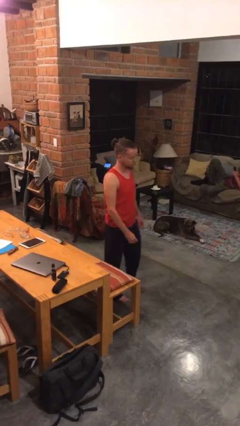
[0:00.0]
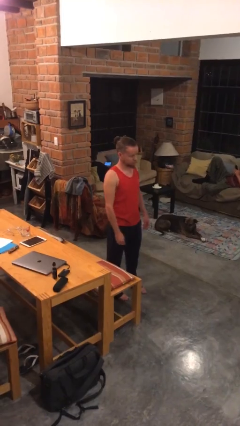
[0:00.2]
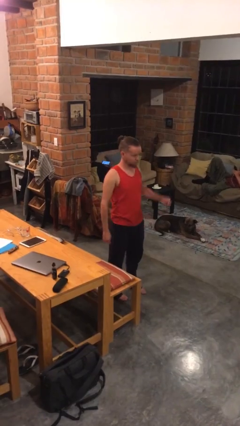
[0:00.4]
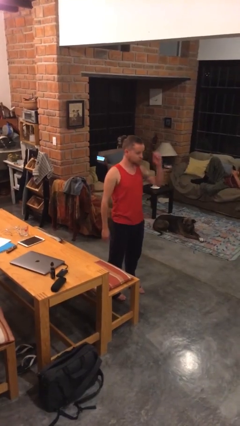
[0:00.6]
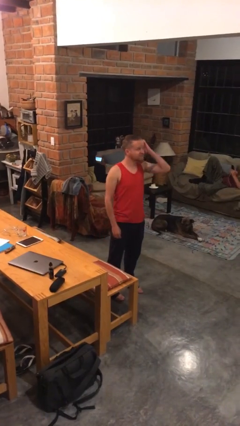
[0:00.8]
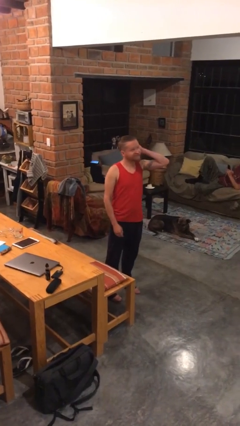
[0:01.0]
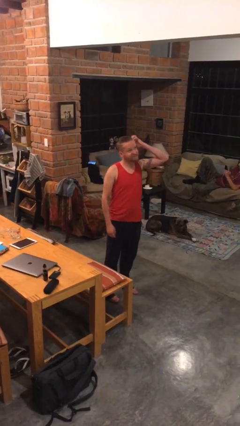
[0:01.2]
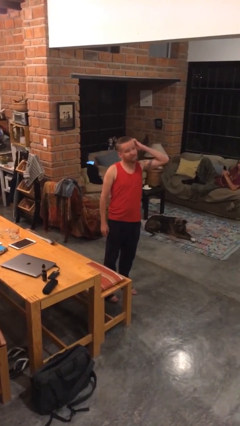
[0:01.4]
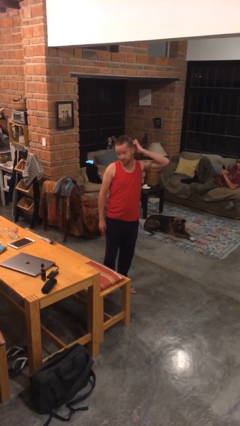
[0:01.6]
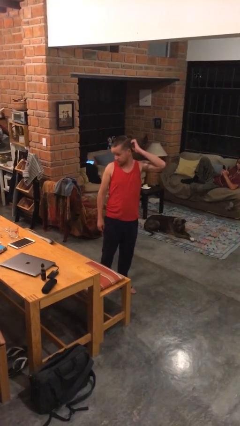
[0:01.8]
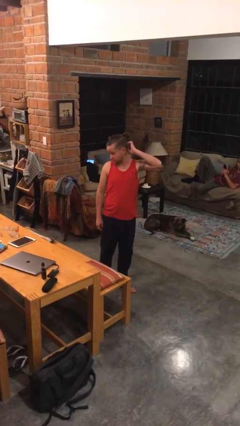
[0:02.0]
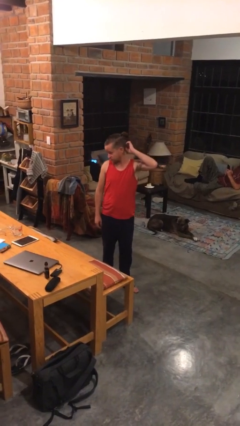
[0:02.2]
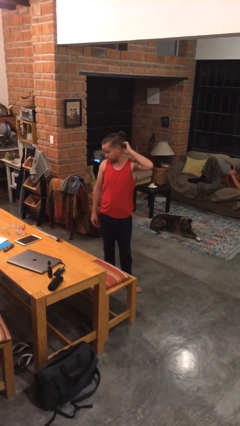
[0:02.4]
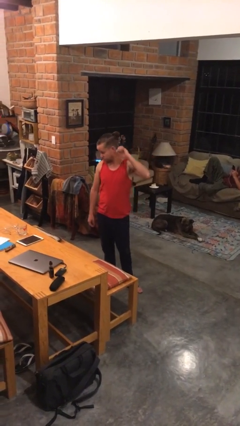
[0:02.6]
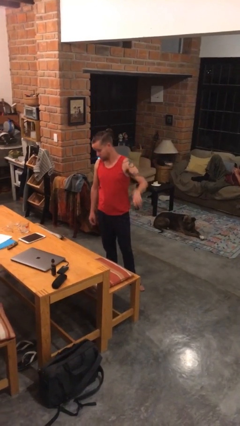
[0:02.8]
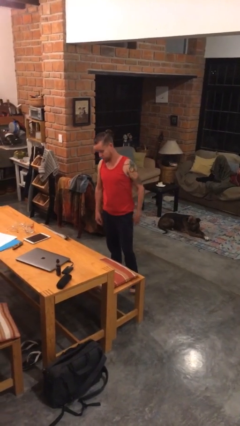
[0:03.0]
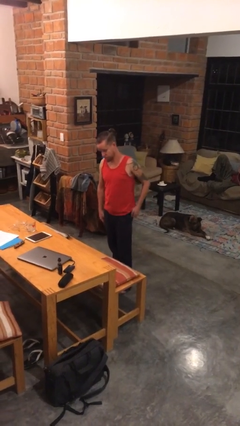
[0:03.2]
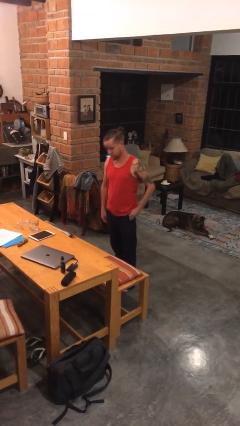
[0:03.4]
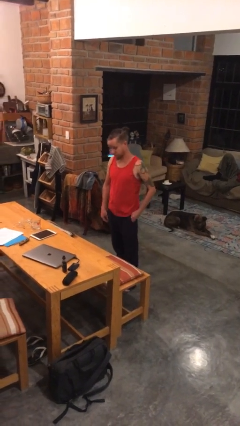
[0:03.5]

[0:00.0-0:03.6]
person scratches face

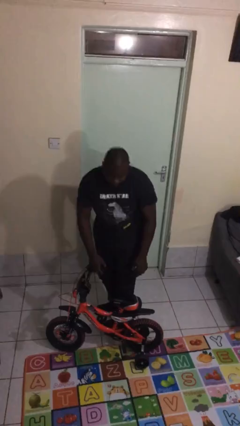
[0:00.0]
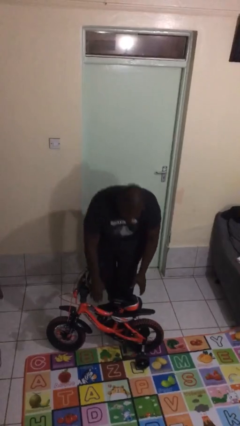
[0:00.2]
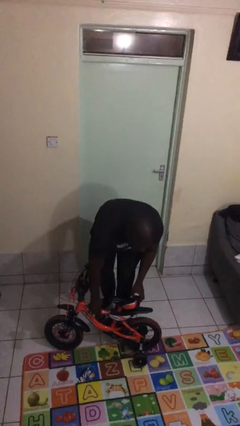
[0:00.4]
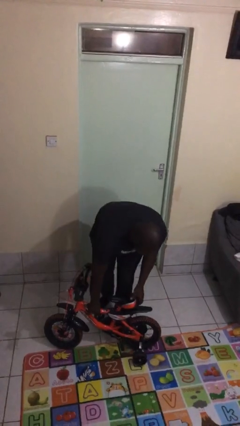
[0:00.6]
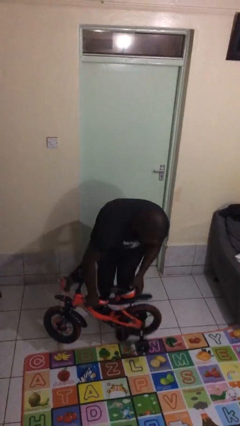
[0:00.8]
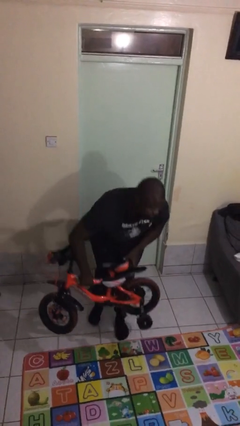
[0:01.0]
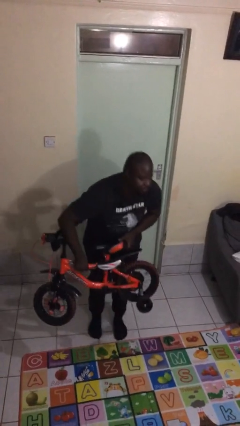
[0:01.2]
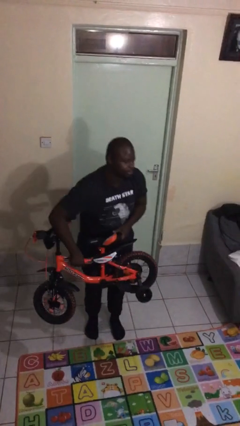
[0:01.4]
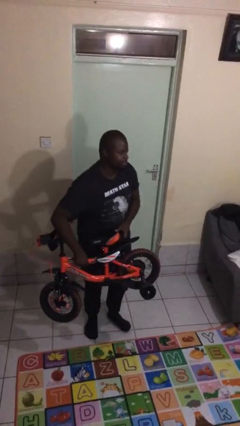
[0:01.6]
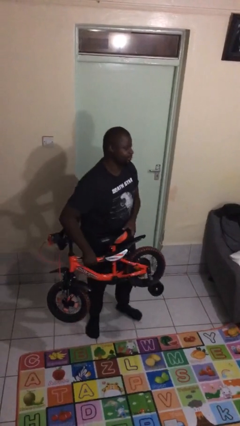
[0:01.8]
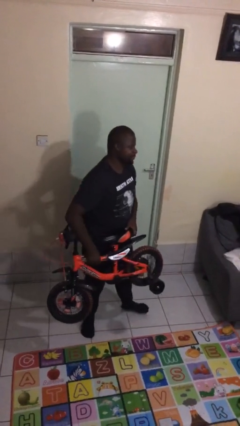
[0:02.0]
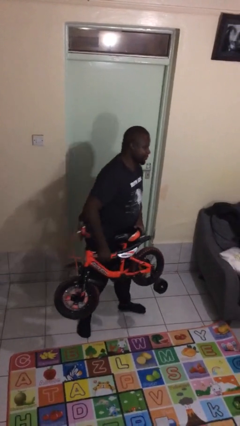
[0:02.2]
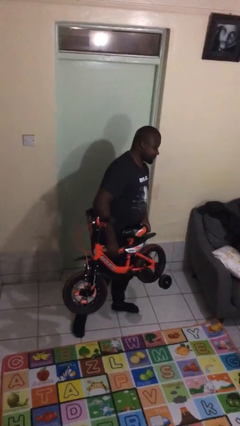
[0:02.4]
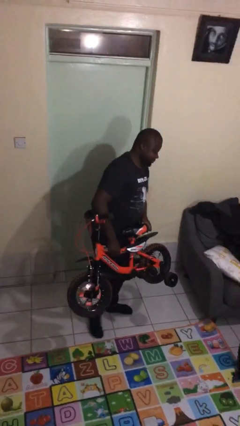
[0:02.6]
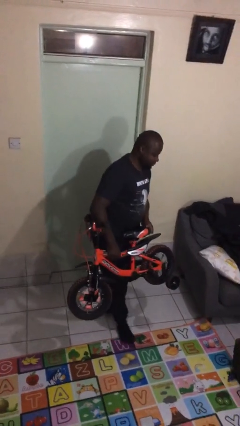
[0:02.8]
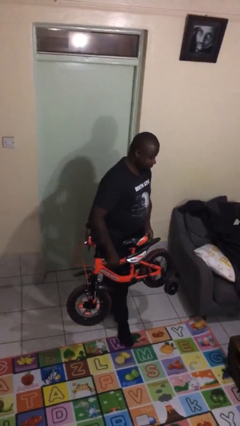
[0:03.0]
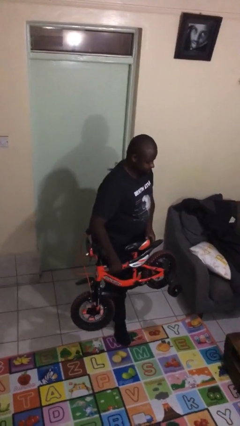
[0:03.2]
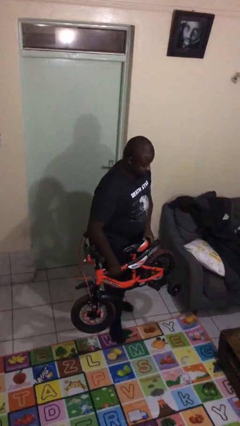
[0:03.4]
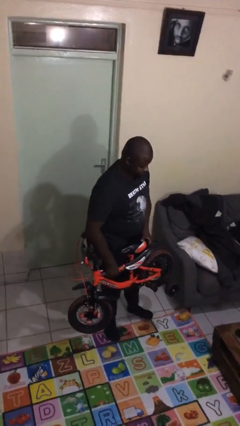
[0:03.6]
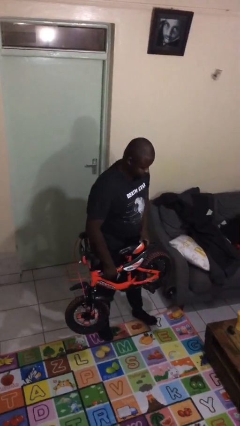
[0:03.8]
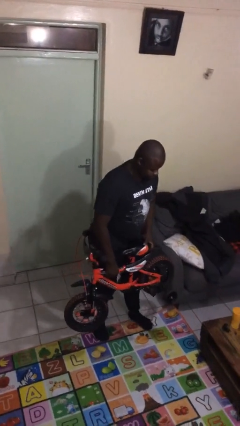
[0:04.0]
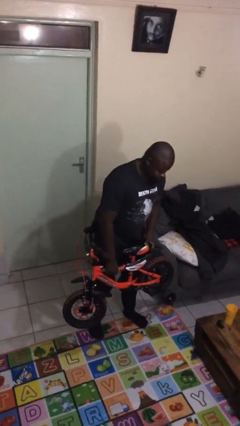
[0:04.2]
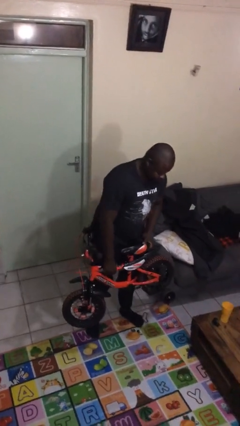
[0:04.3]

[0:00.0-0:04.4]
person carries bicycle

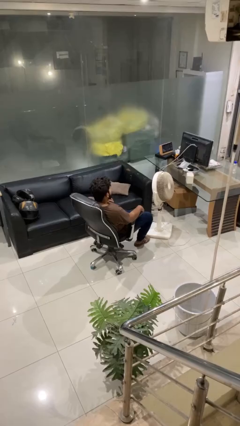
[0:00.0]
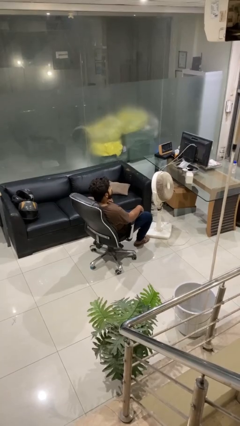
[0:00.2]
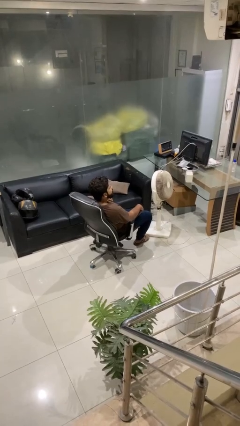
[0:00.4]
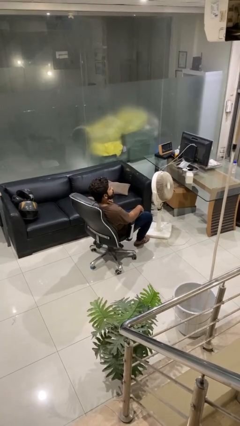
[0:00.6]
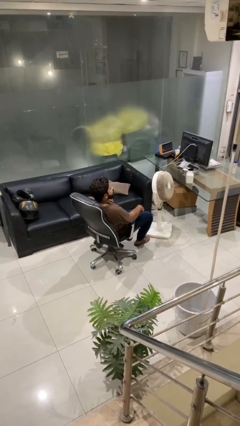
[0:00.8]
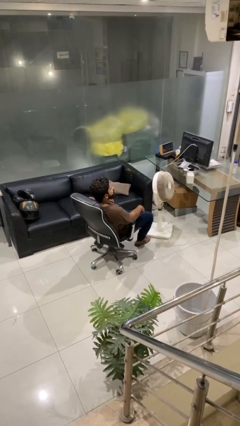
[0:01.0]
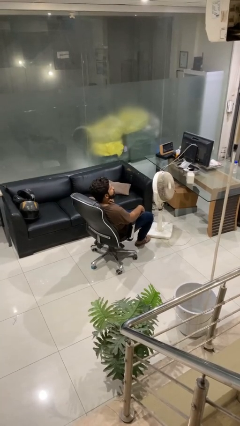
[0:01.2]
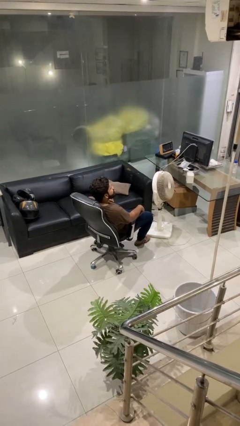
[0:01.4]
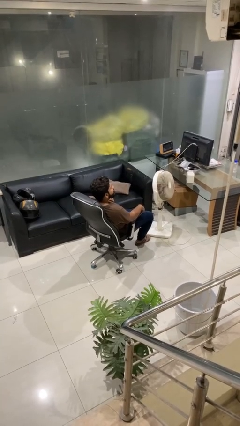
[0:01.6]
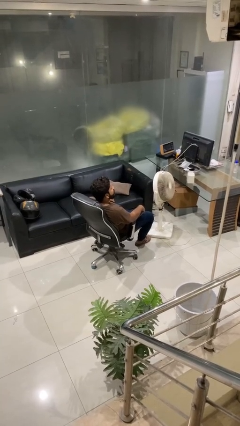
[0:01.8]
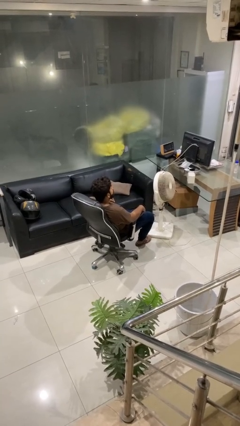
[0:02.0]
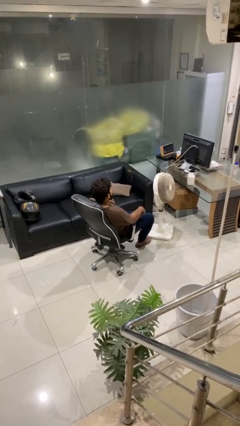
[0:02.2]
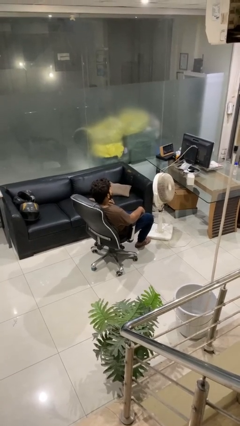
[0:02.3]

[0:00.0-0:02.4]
person sticks out tongue

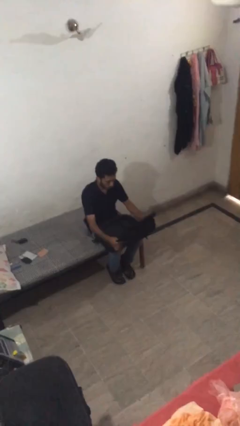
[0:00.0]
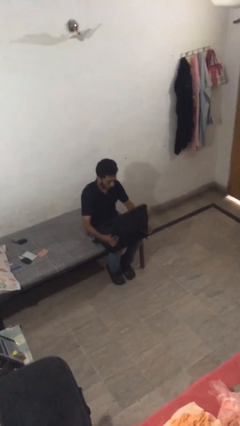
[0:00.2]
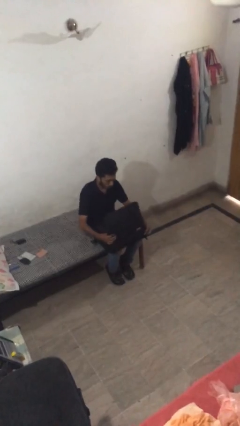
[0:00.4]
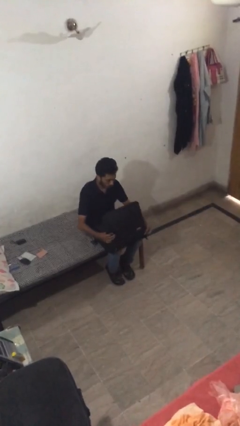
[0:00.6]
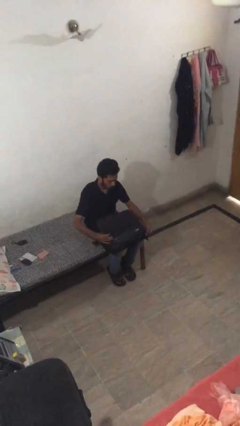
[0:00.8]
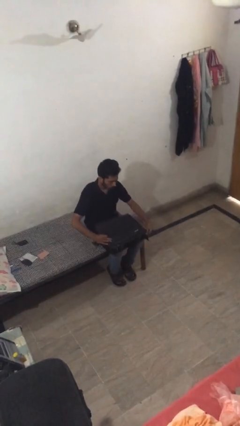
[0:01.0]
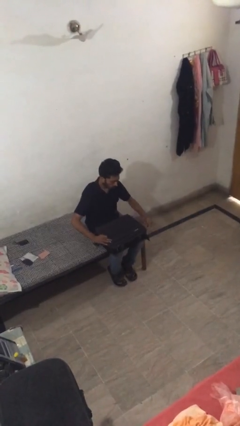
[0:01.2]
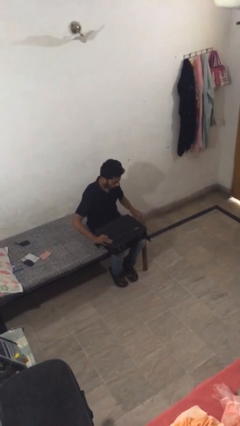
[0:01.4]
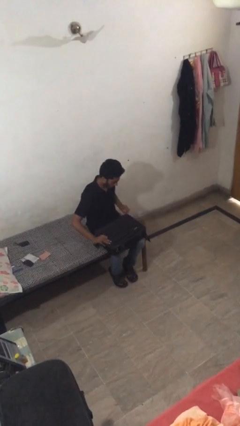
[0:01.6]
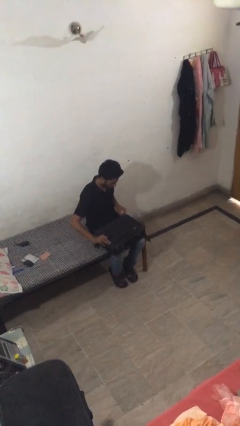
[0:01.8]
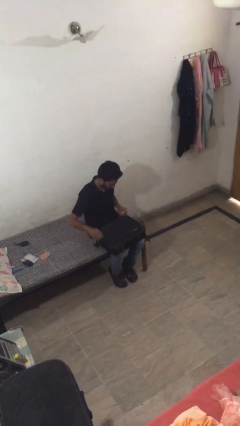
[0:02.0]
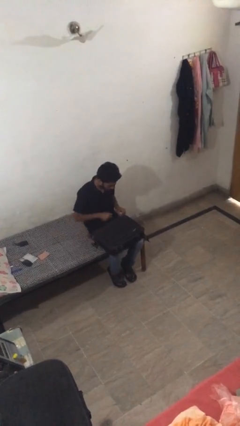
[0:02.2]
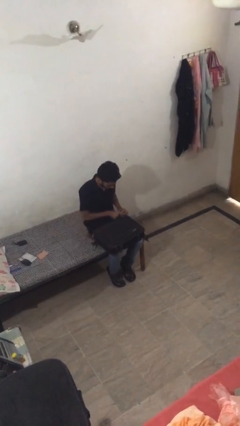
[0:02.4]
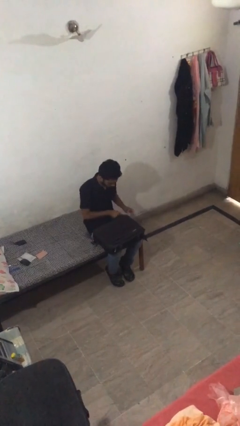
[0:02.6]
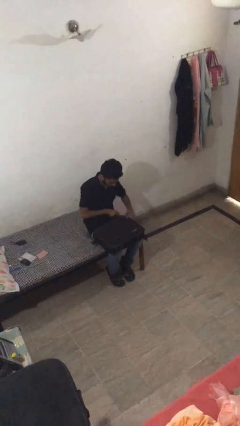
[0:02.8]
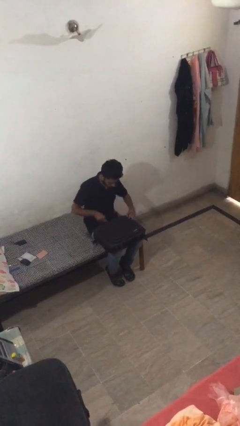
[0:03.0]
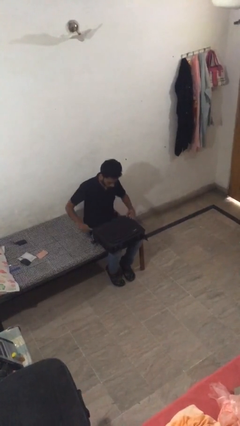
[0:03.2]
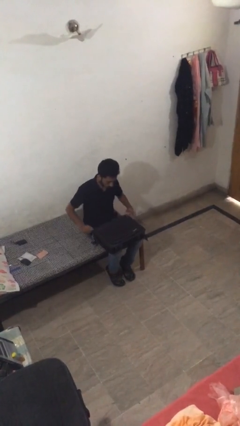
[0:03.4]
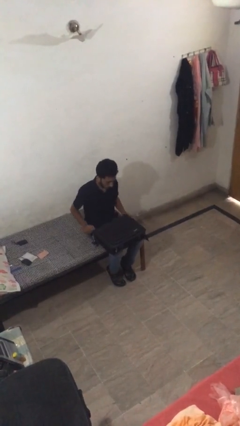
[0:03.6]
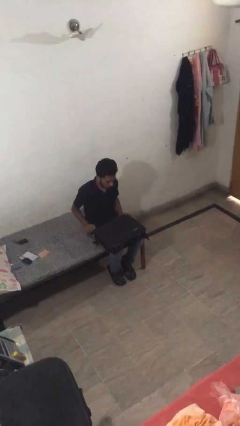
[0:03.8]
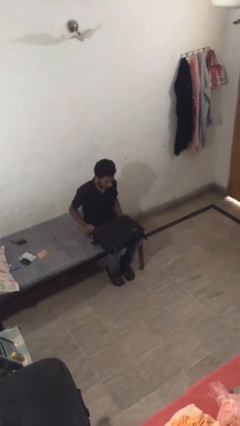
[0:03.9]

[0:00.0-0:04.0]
person closes suitcase

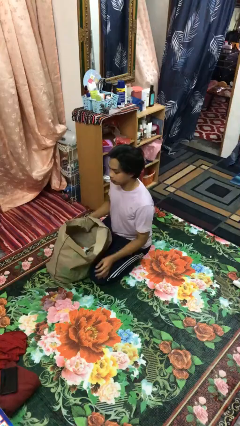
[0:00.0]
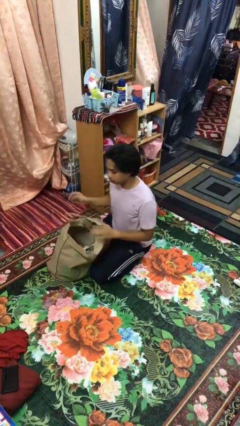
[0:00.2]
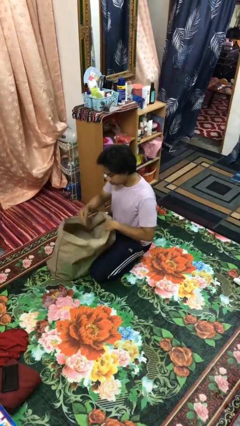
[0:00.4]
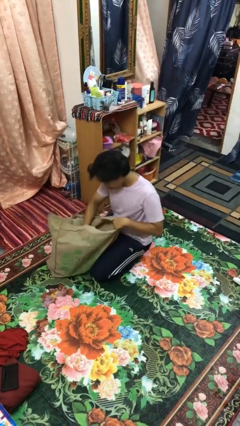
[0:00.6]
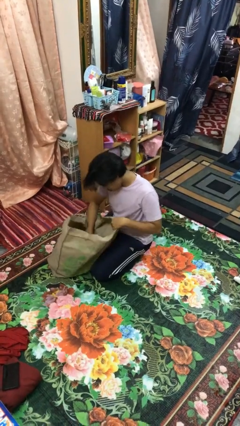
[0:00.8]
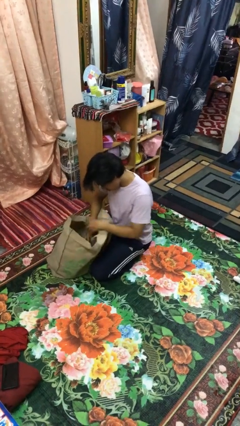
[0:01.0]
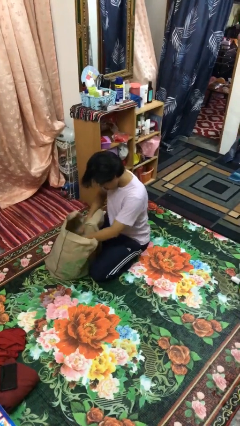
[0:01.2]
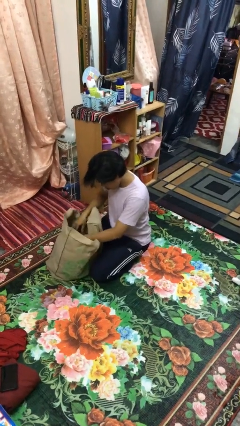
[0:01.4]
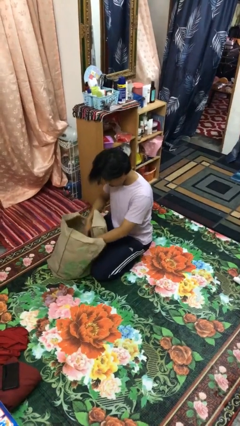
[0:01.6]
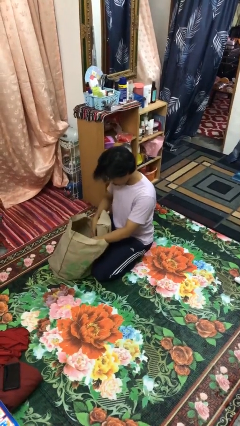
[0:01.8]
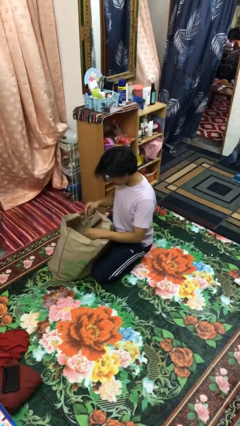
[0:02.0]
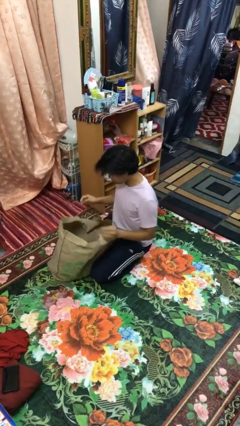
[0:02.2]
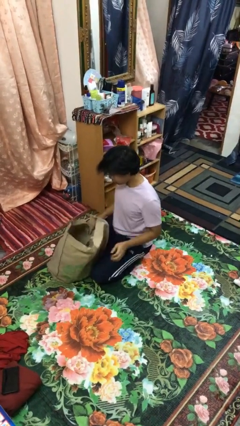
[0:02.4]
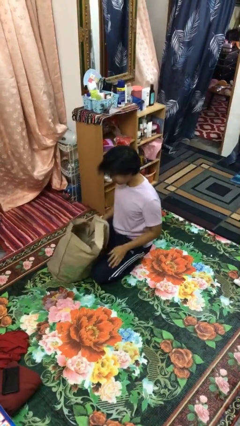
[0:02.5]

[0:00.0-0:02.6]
person searches in bag

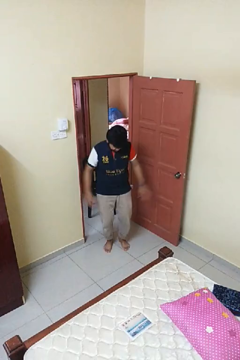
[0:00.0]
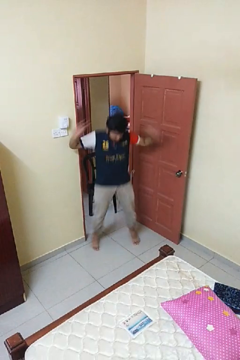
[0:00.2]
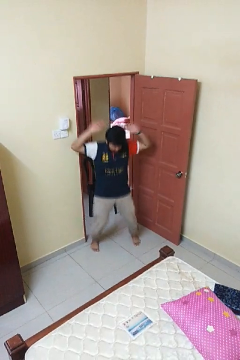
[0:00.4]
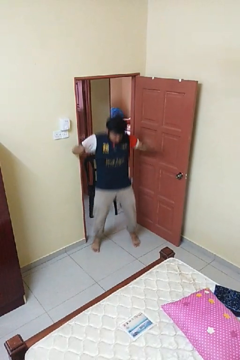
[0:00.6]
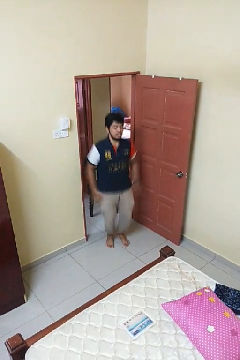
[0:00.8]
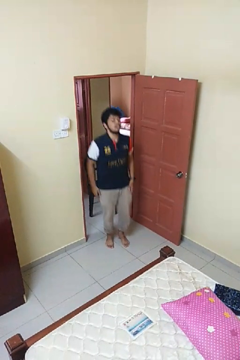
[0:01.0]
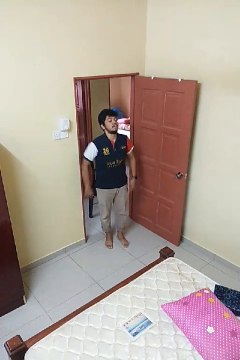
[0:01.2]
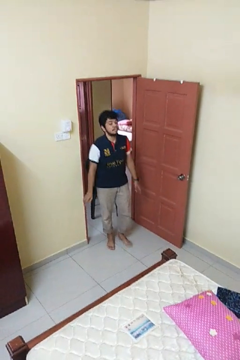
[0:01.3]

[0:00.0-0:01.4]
person exercises with jumping jacks
